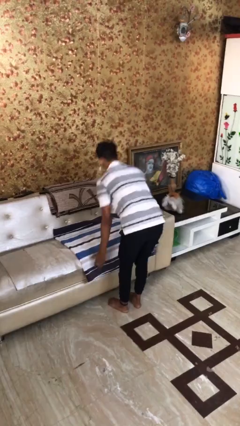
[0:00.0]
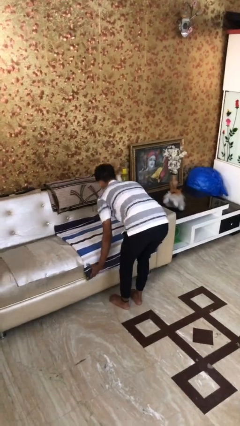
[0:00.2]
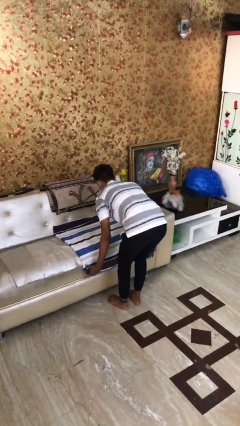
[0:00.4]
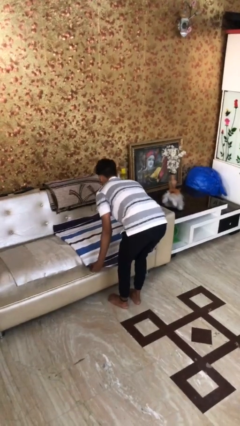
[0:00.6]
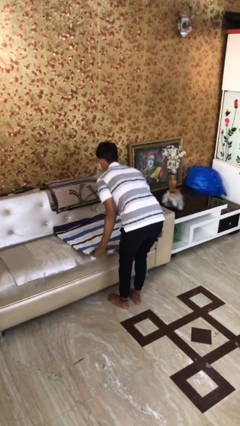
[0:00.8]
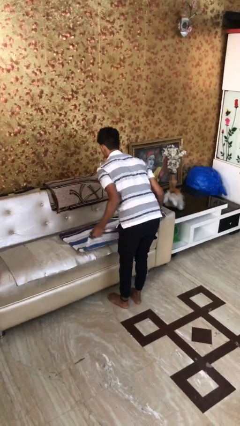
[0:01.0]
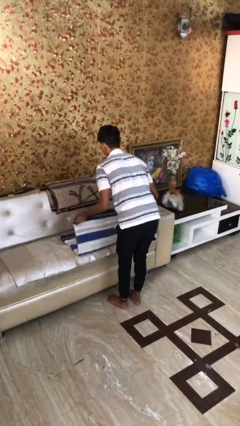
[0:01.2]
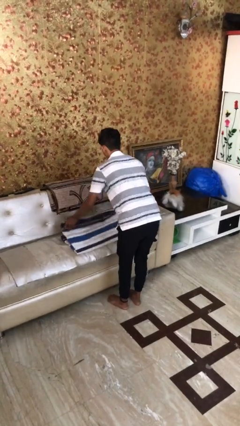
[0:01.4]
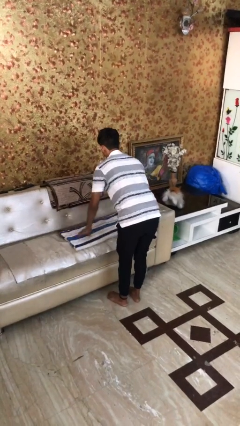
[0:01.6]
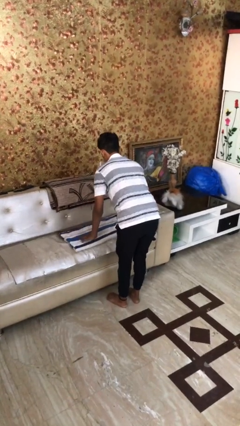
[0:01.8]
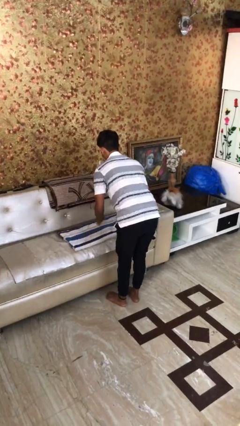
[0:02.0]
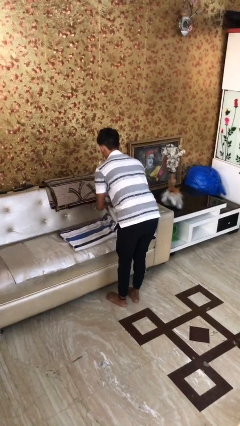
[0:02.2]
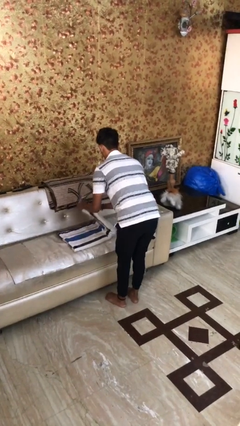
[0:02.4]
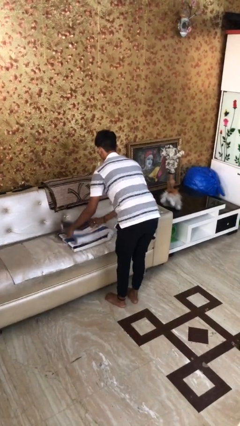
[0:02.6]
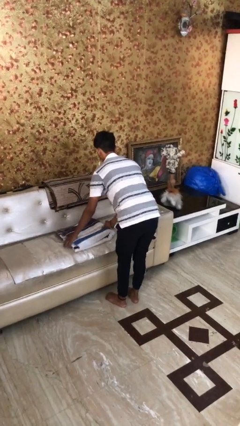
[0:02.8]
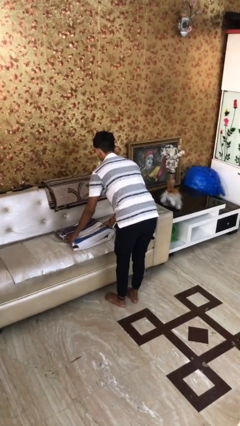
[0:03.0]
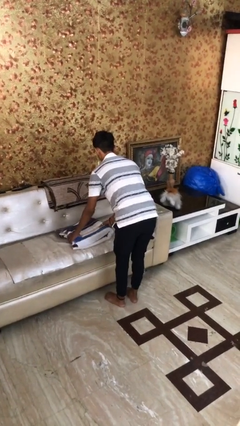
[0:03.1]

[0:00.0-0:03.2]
person folds towel

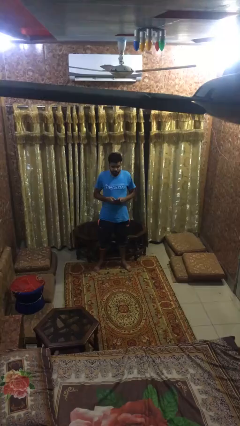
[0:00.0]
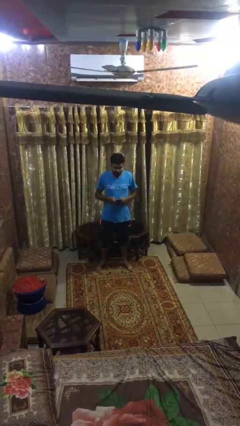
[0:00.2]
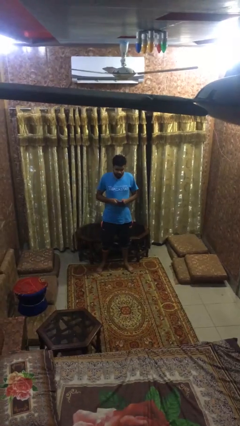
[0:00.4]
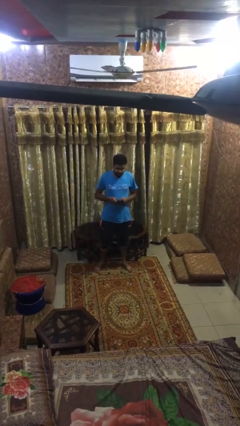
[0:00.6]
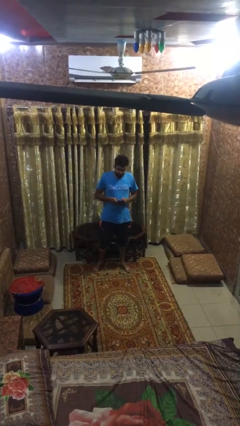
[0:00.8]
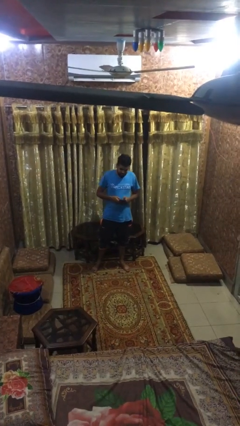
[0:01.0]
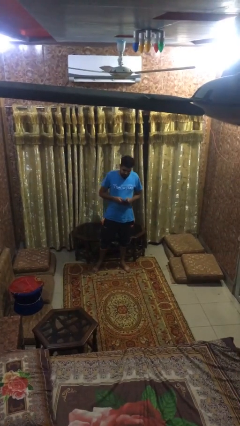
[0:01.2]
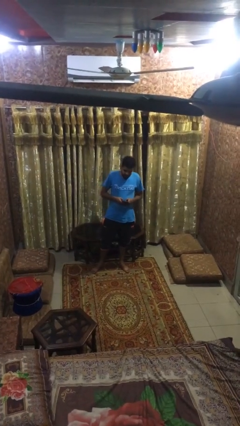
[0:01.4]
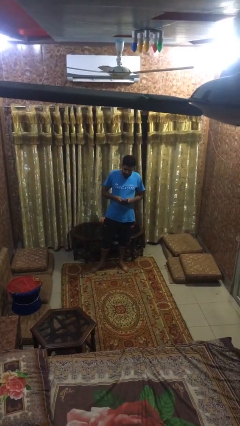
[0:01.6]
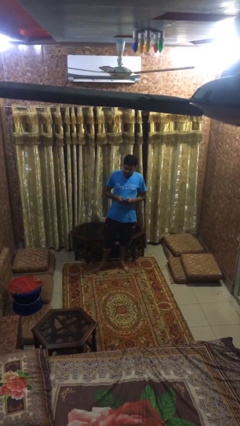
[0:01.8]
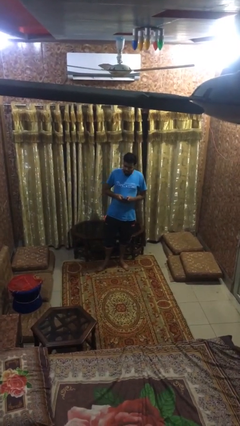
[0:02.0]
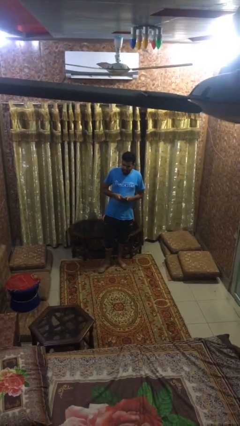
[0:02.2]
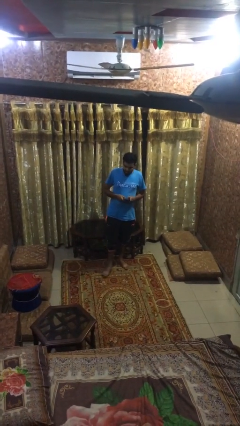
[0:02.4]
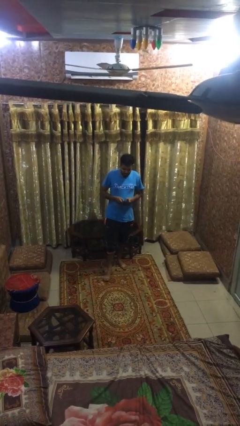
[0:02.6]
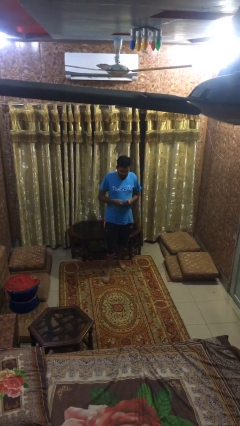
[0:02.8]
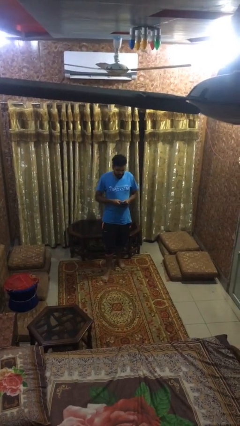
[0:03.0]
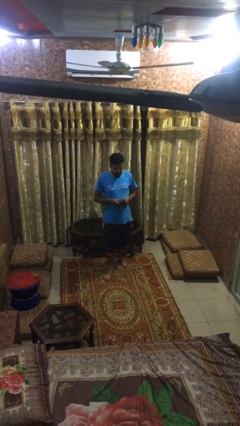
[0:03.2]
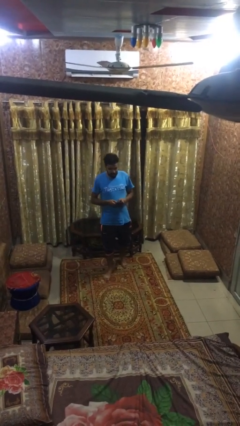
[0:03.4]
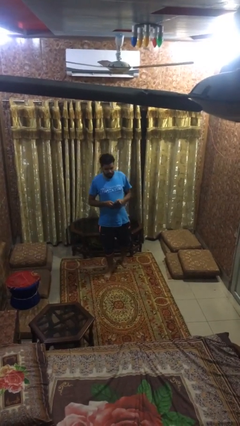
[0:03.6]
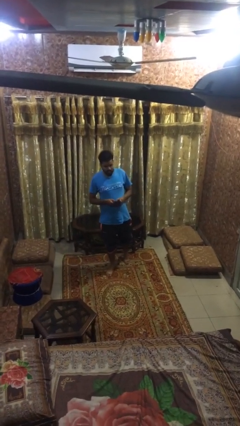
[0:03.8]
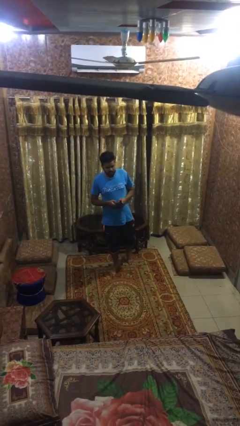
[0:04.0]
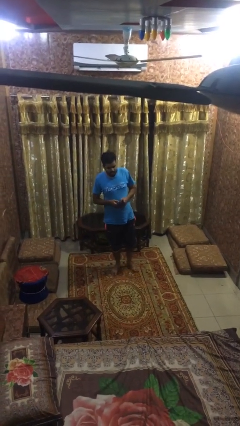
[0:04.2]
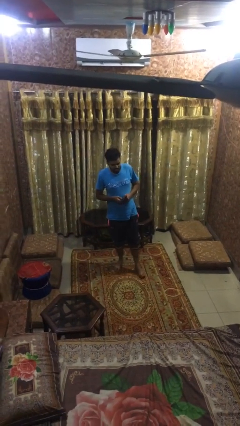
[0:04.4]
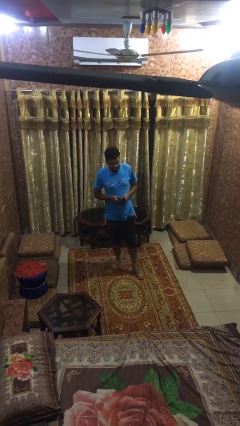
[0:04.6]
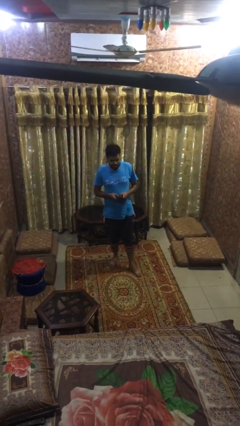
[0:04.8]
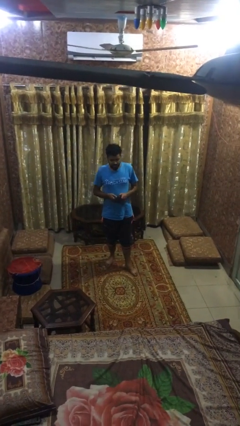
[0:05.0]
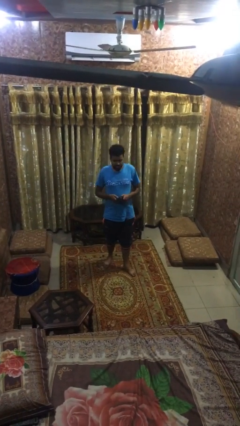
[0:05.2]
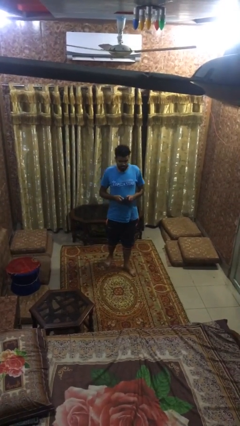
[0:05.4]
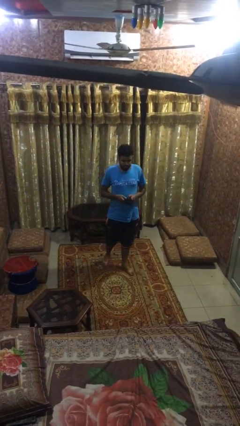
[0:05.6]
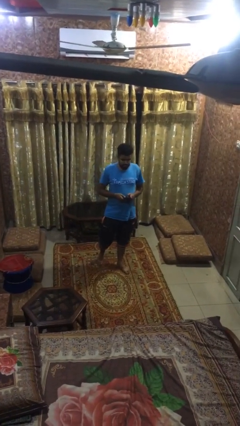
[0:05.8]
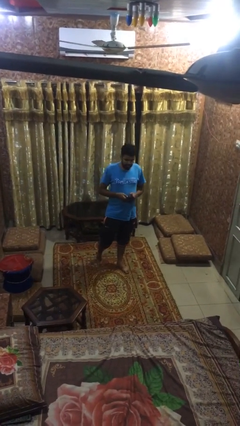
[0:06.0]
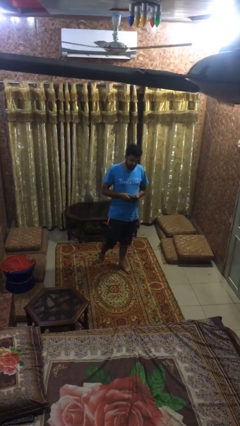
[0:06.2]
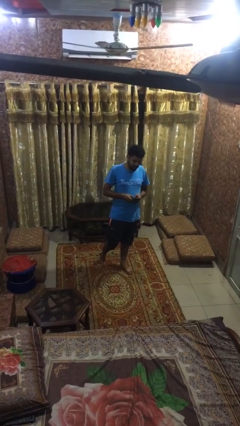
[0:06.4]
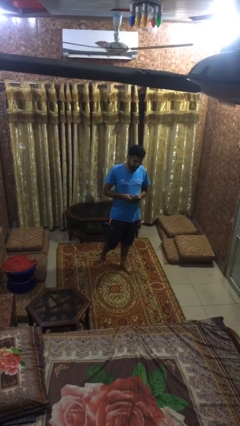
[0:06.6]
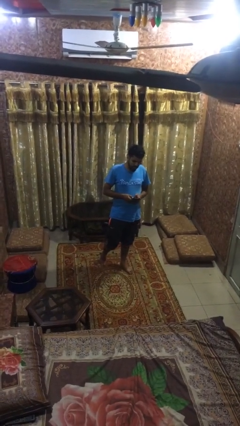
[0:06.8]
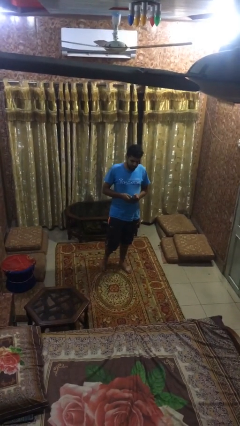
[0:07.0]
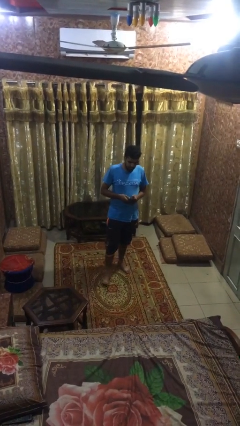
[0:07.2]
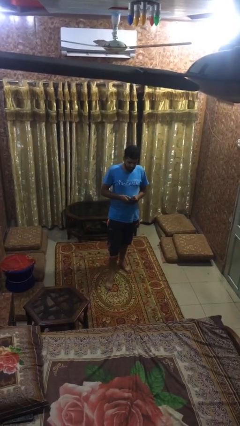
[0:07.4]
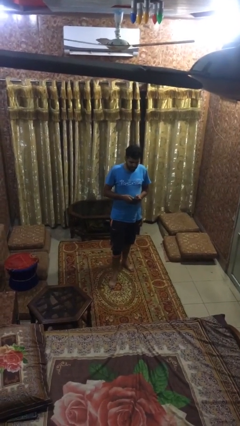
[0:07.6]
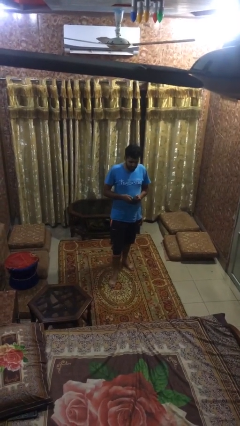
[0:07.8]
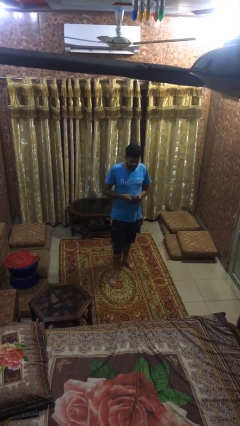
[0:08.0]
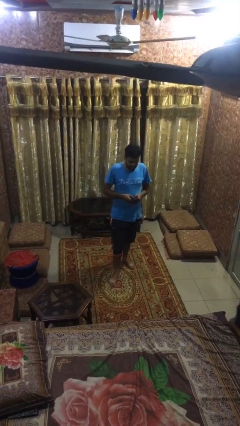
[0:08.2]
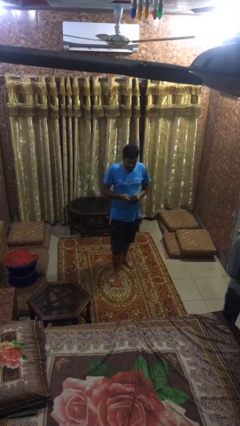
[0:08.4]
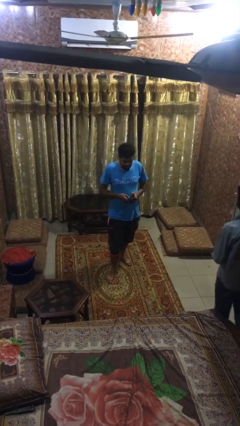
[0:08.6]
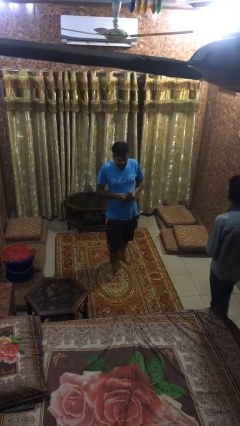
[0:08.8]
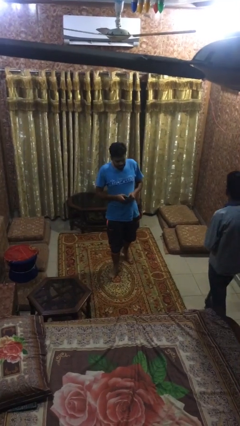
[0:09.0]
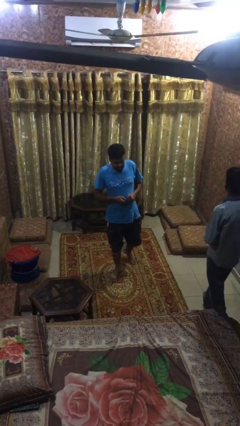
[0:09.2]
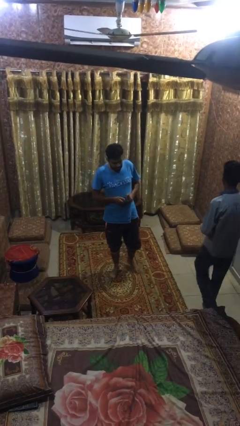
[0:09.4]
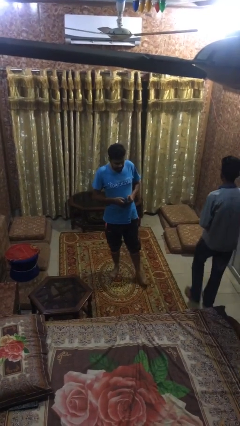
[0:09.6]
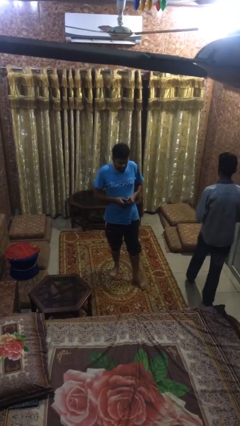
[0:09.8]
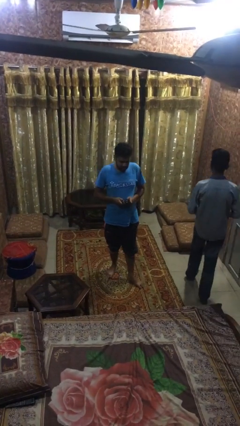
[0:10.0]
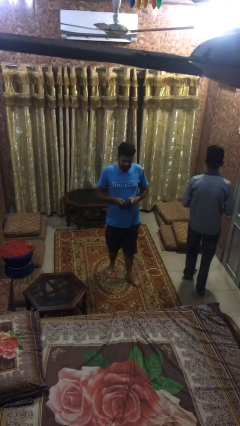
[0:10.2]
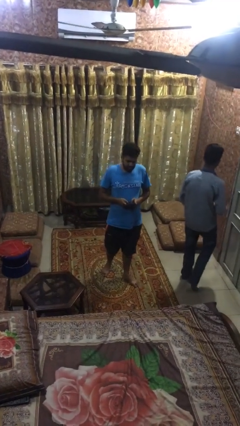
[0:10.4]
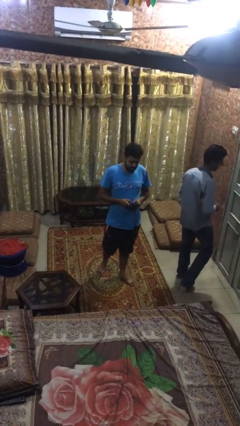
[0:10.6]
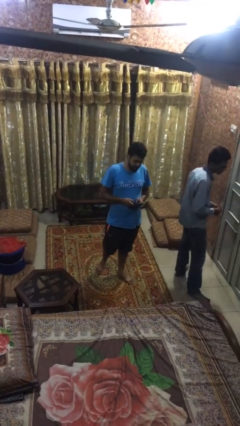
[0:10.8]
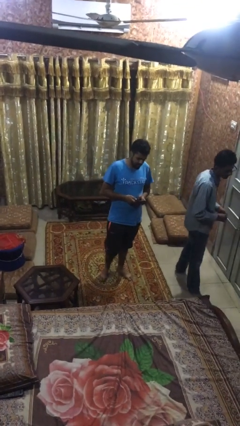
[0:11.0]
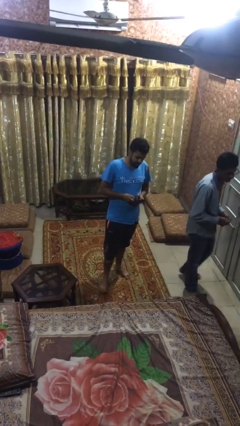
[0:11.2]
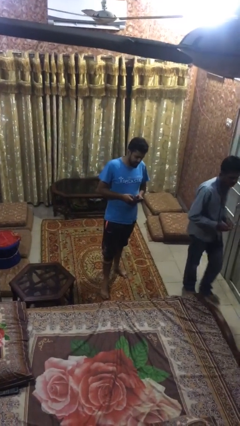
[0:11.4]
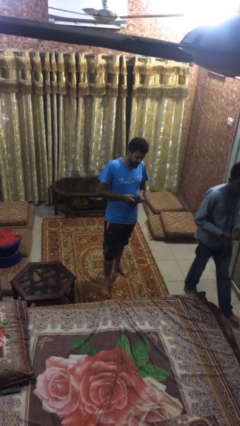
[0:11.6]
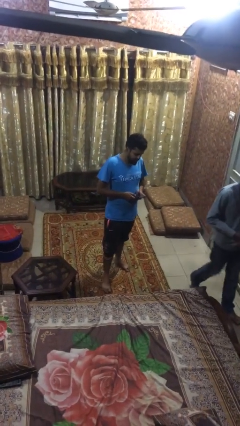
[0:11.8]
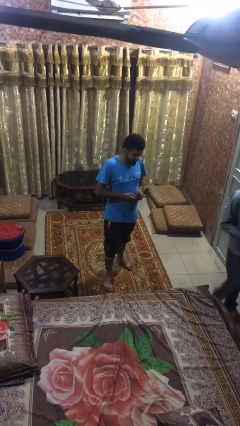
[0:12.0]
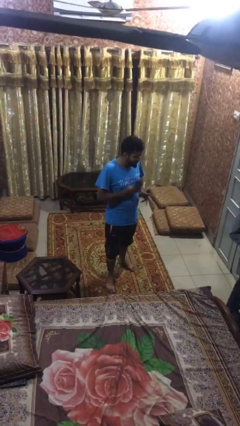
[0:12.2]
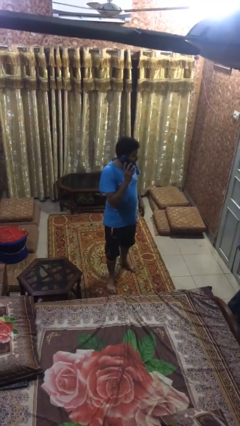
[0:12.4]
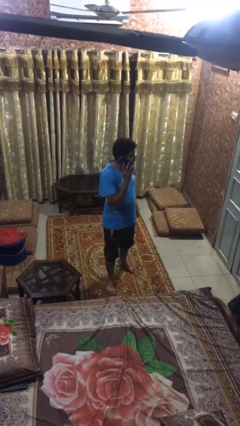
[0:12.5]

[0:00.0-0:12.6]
person texts on phone

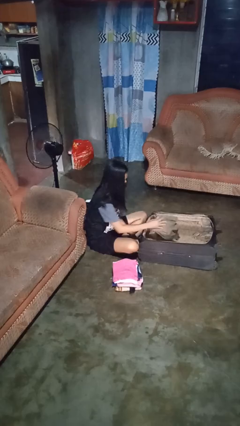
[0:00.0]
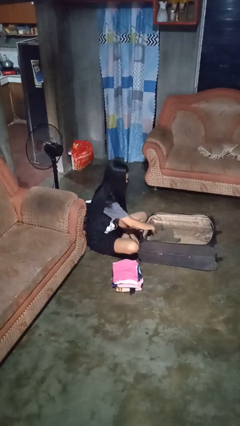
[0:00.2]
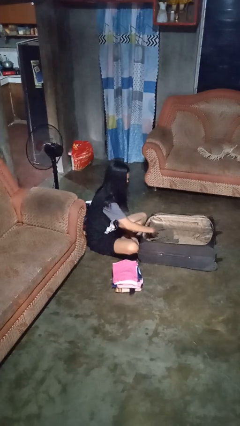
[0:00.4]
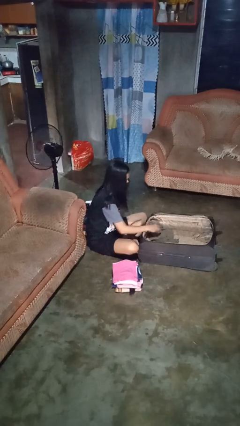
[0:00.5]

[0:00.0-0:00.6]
person loads clothes into suitcase

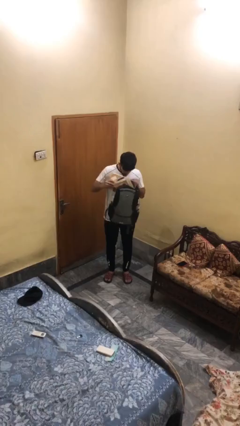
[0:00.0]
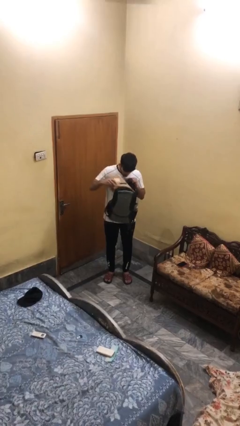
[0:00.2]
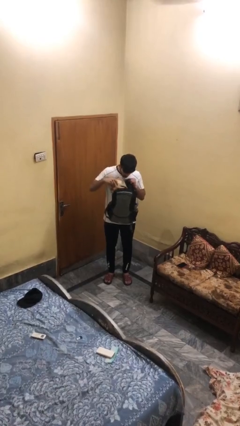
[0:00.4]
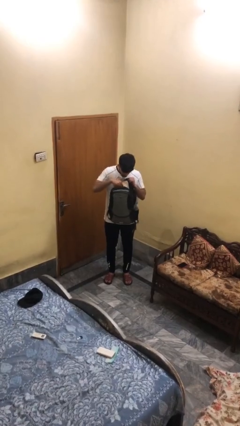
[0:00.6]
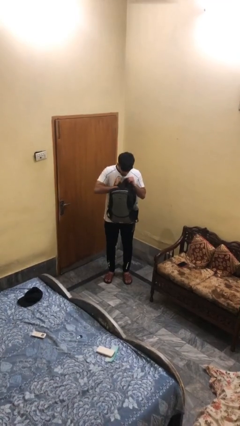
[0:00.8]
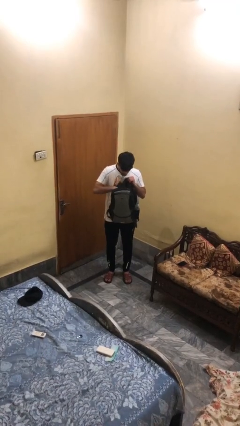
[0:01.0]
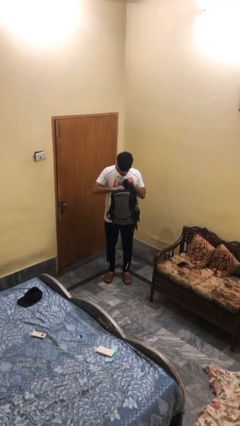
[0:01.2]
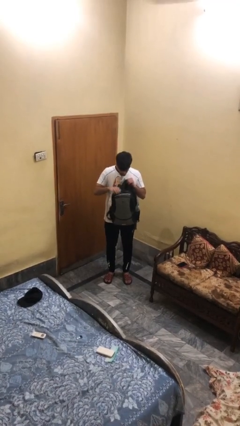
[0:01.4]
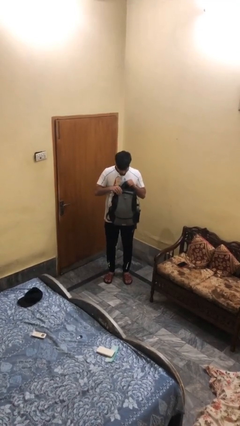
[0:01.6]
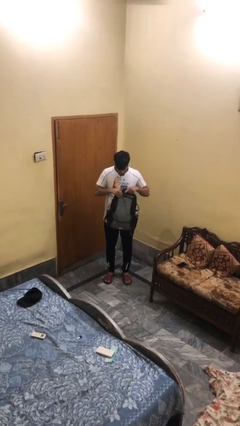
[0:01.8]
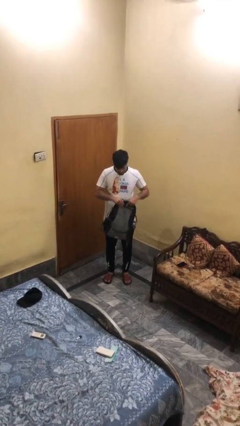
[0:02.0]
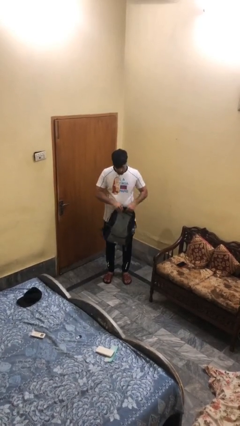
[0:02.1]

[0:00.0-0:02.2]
person puts object into backpack
